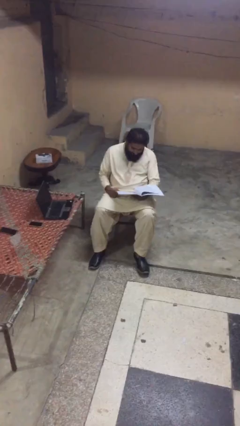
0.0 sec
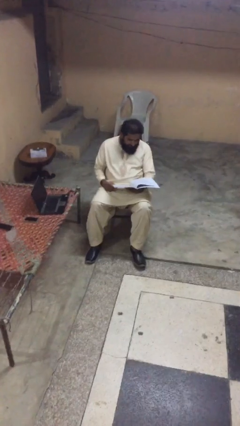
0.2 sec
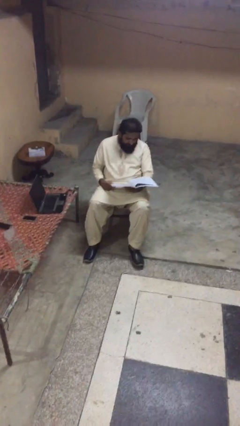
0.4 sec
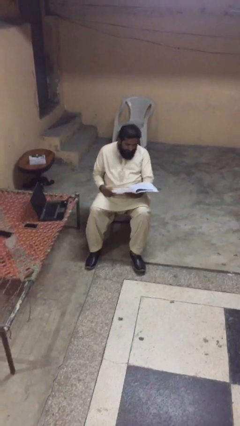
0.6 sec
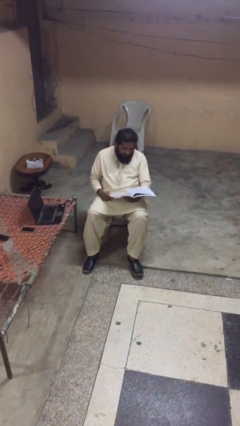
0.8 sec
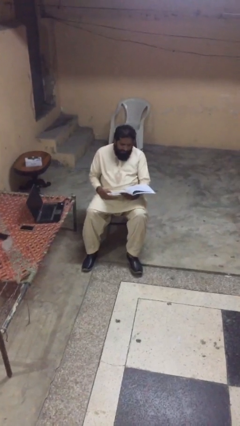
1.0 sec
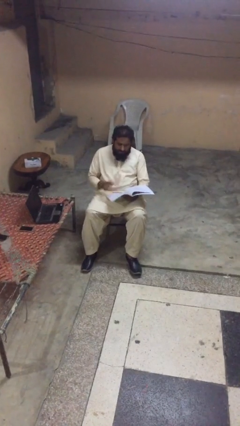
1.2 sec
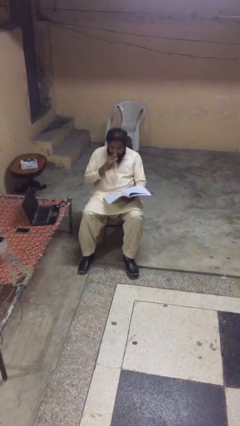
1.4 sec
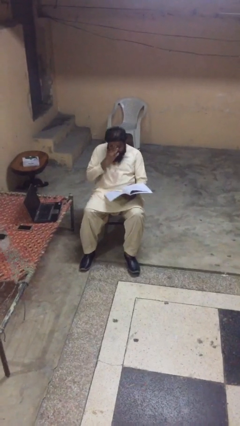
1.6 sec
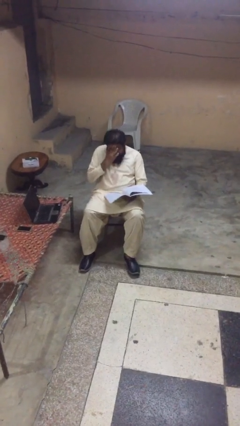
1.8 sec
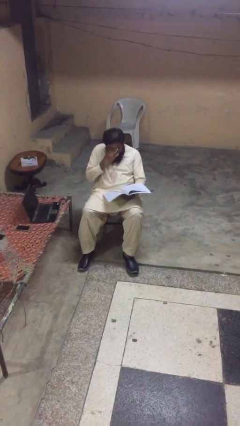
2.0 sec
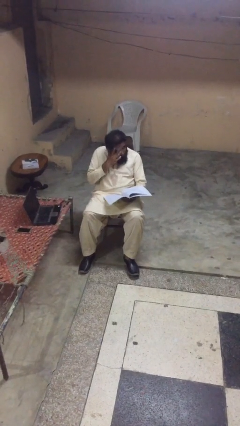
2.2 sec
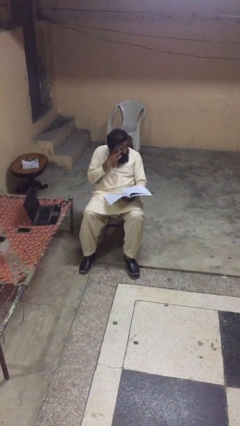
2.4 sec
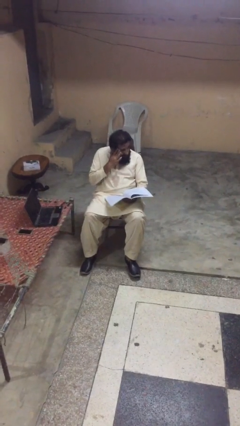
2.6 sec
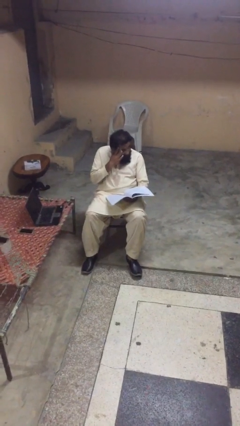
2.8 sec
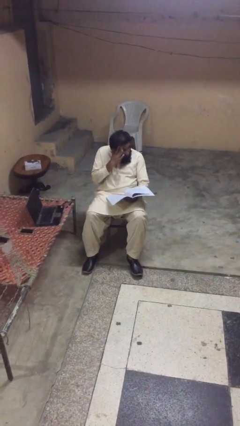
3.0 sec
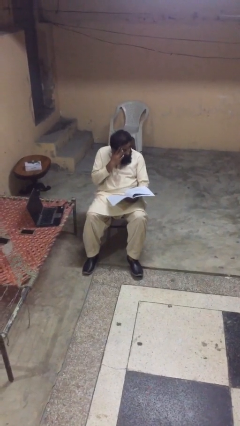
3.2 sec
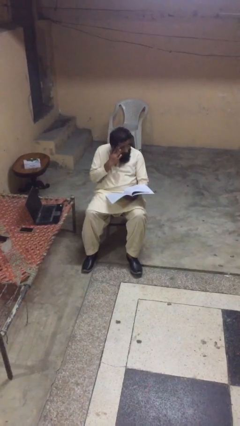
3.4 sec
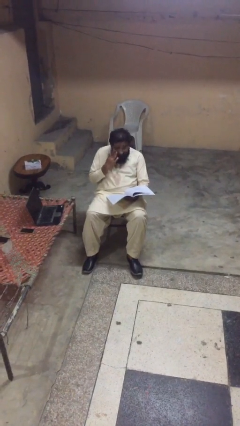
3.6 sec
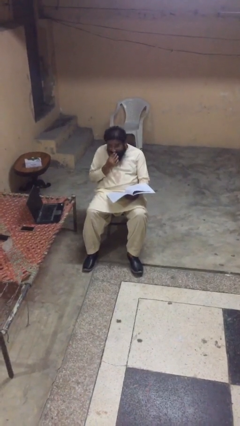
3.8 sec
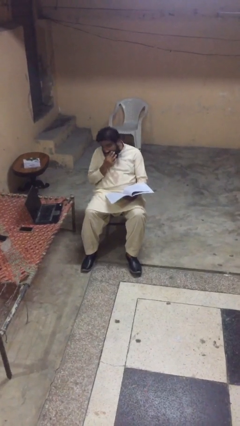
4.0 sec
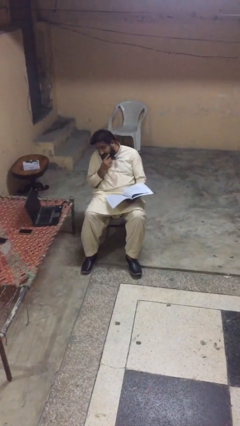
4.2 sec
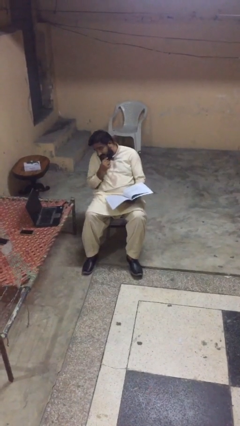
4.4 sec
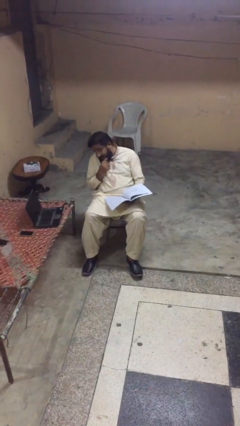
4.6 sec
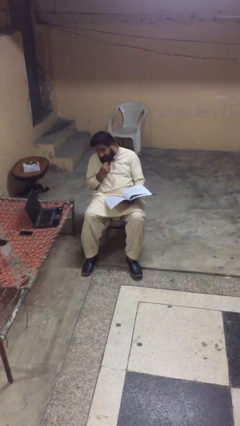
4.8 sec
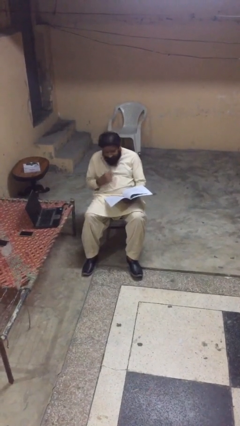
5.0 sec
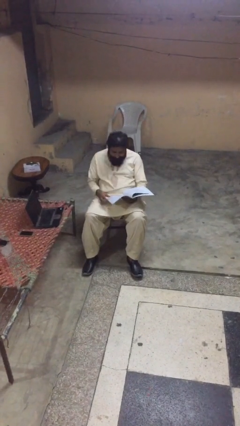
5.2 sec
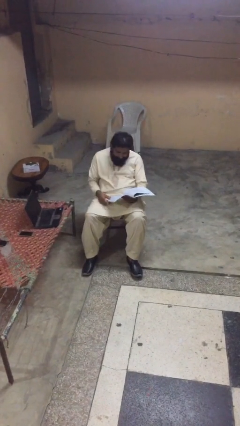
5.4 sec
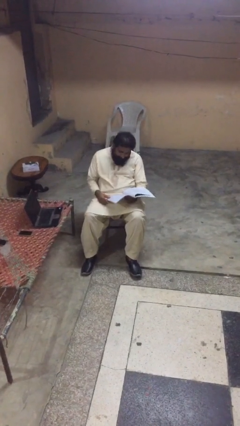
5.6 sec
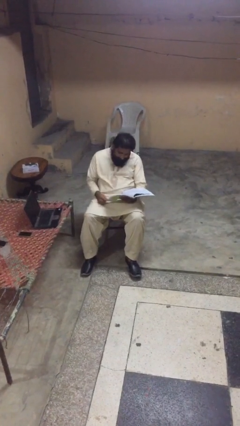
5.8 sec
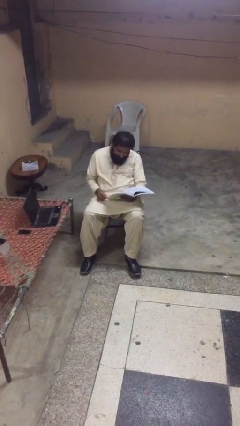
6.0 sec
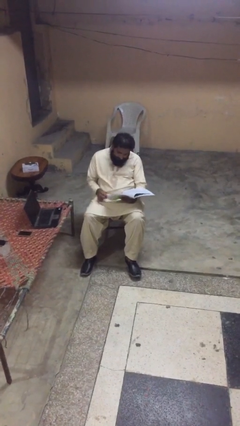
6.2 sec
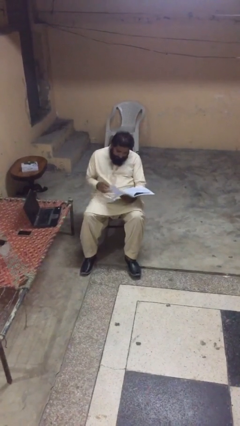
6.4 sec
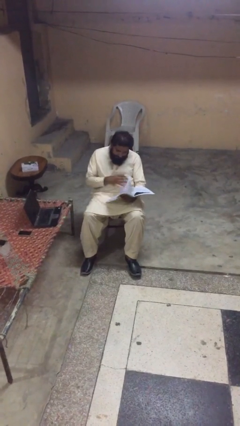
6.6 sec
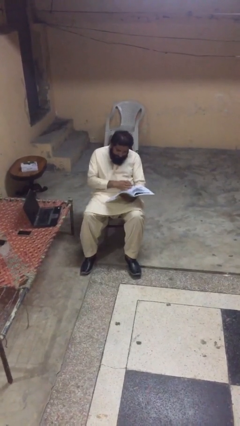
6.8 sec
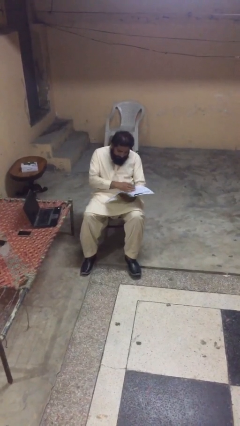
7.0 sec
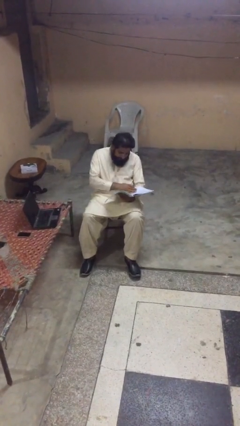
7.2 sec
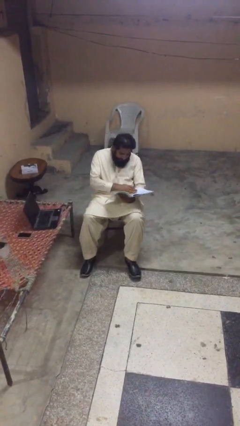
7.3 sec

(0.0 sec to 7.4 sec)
person reads document

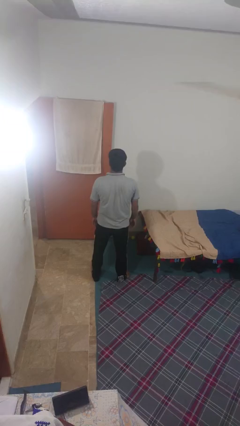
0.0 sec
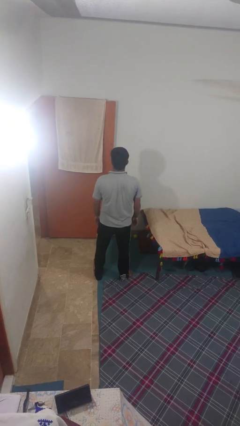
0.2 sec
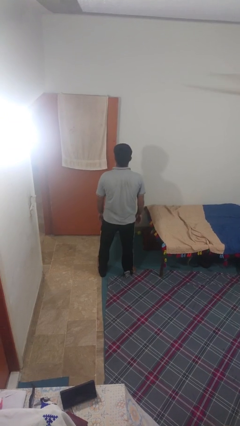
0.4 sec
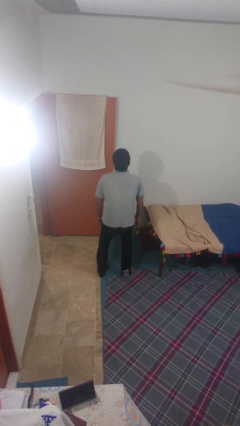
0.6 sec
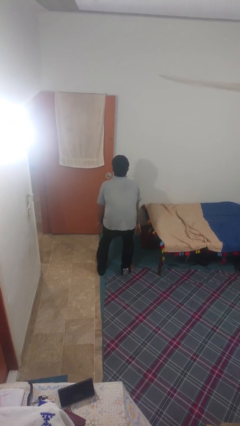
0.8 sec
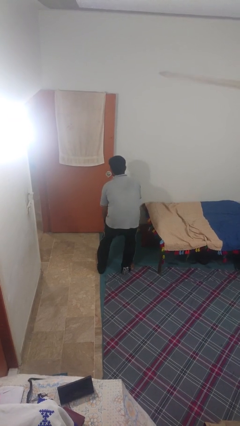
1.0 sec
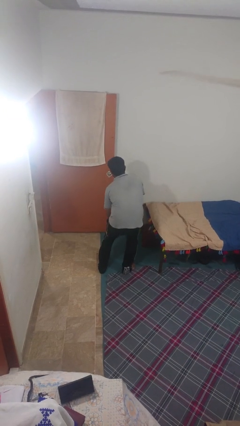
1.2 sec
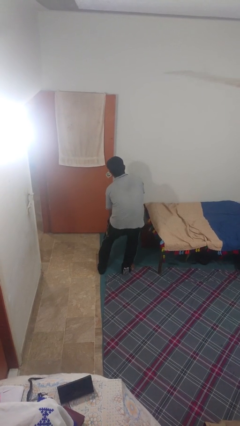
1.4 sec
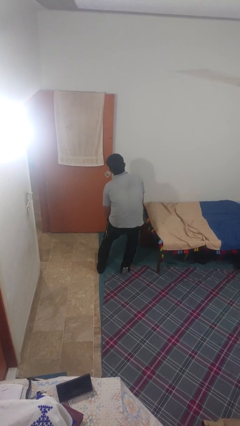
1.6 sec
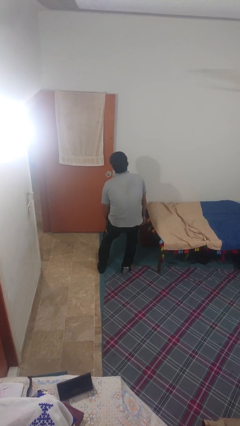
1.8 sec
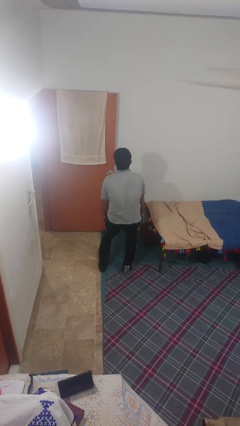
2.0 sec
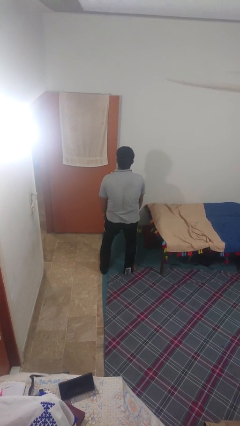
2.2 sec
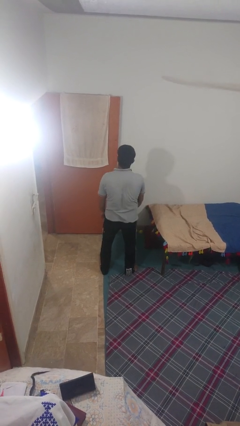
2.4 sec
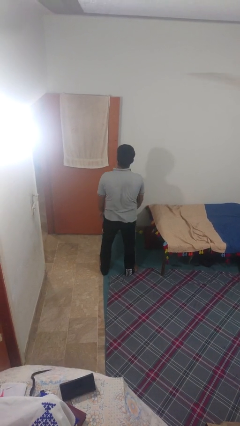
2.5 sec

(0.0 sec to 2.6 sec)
person gestures hang loose

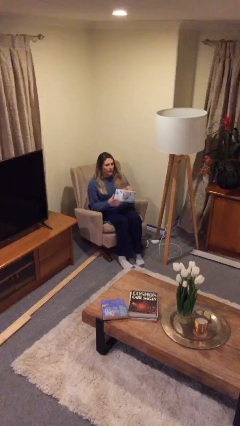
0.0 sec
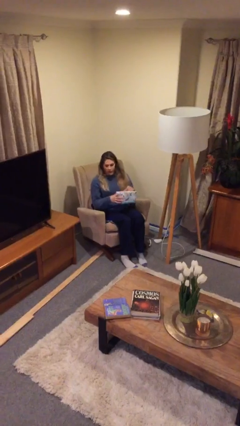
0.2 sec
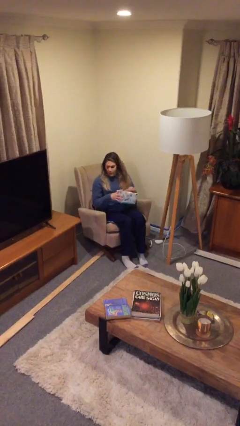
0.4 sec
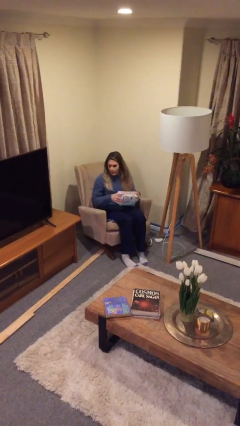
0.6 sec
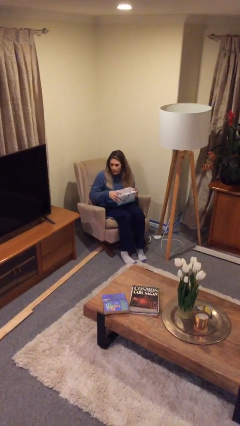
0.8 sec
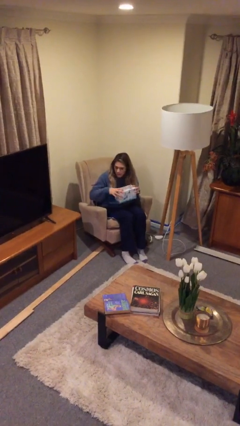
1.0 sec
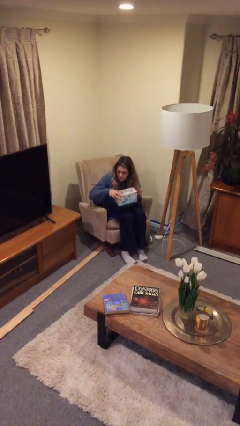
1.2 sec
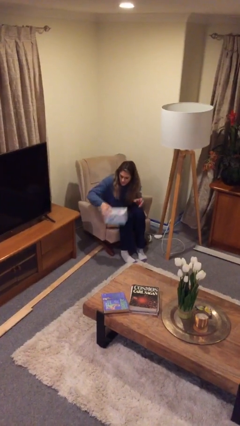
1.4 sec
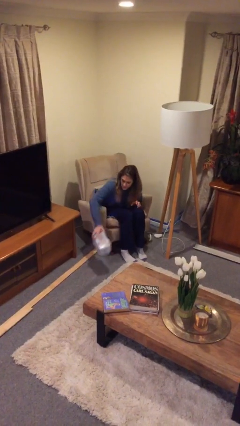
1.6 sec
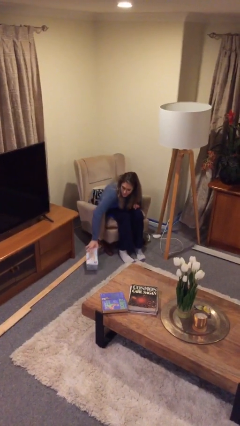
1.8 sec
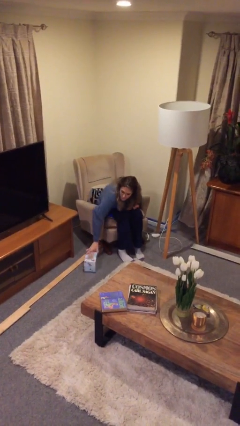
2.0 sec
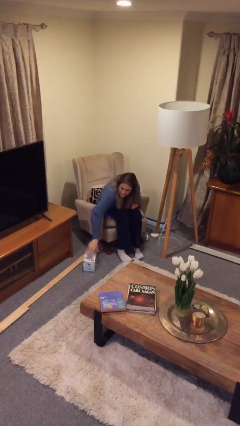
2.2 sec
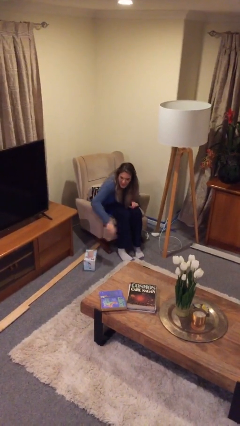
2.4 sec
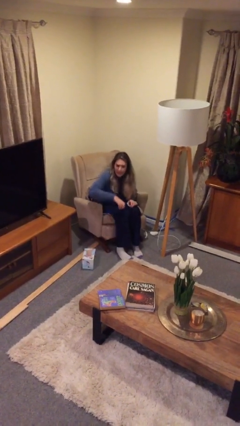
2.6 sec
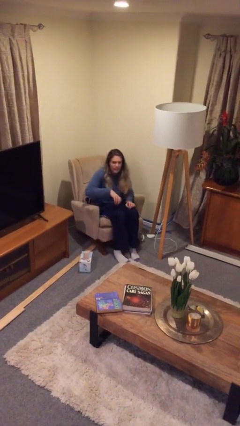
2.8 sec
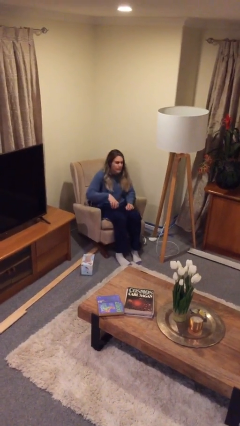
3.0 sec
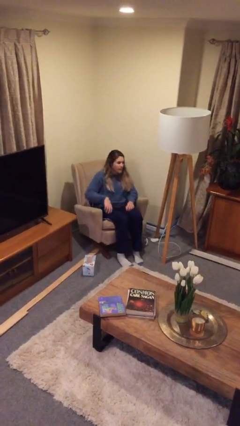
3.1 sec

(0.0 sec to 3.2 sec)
person puts down object on floor

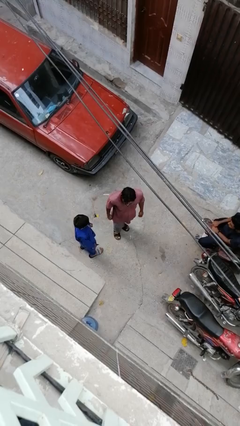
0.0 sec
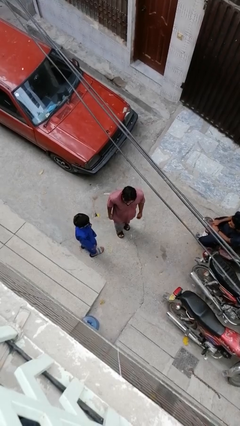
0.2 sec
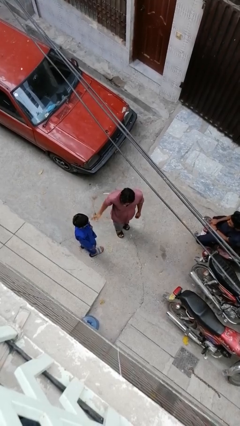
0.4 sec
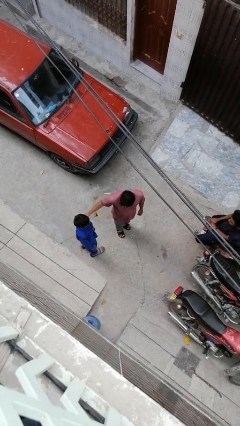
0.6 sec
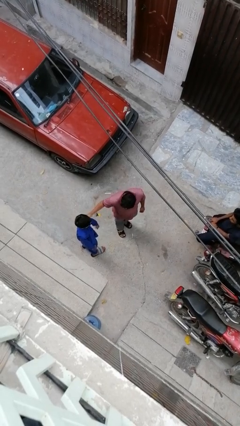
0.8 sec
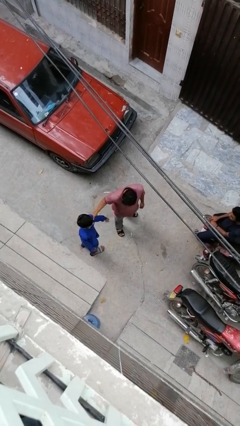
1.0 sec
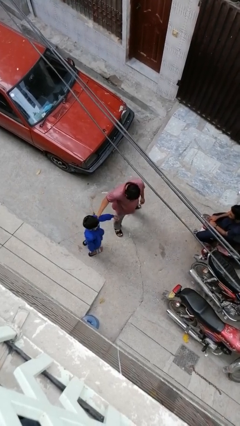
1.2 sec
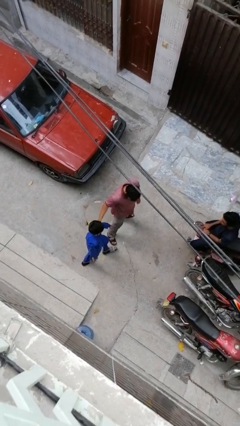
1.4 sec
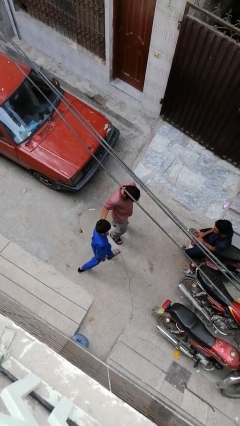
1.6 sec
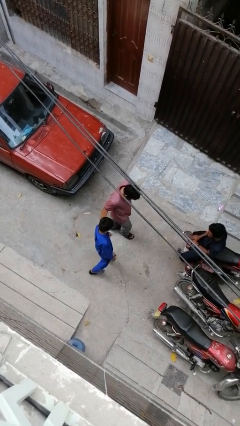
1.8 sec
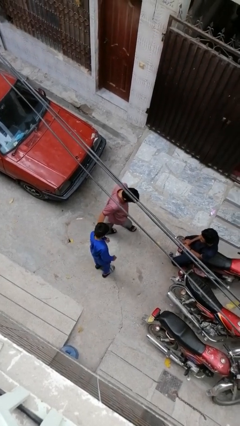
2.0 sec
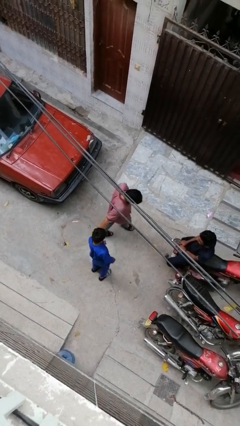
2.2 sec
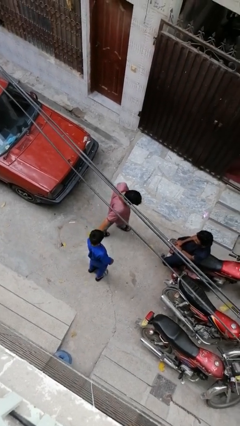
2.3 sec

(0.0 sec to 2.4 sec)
person grabs person by bicep

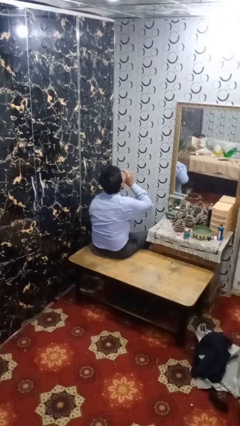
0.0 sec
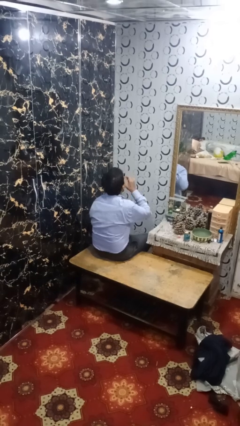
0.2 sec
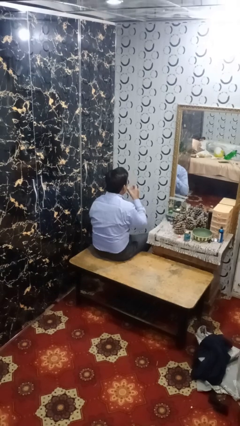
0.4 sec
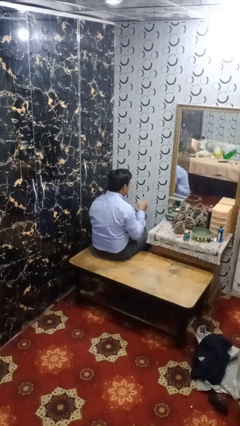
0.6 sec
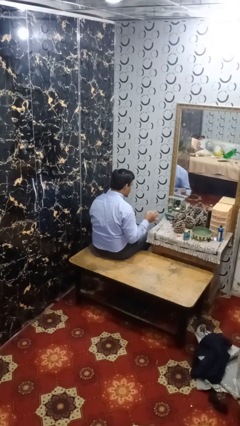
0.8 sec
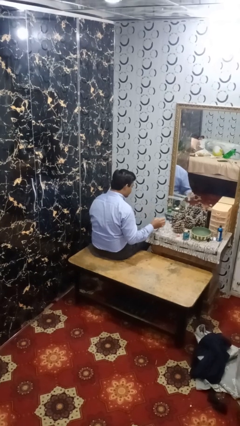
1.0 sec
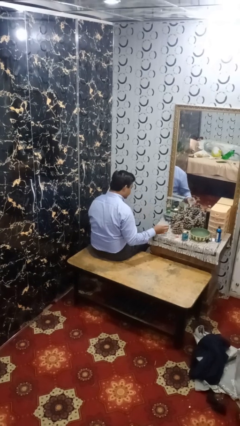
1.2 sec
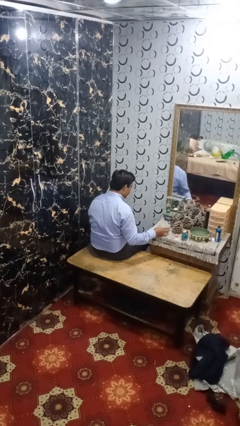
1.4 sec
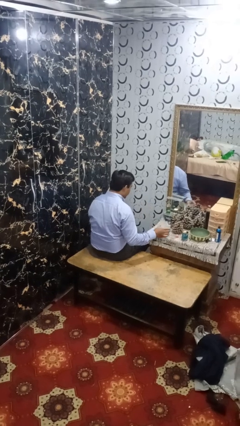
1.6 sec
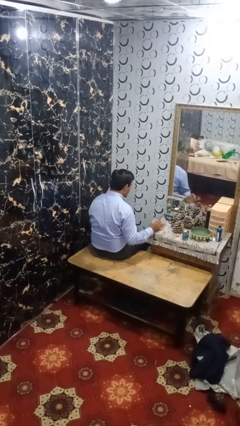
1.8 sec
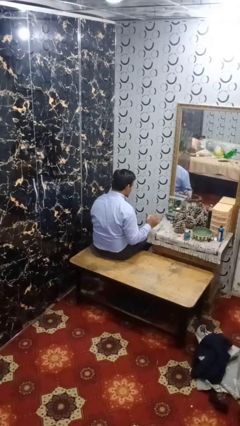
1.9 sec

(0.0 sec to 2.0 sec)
person puts down object on table
